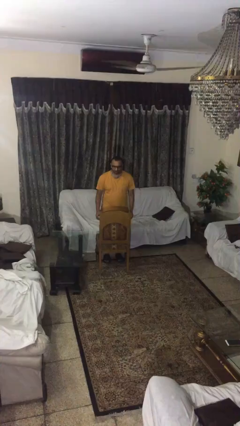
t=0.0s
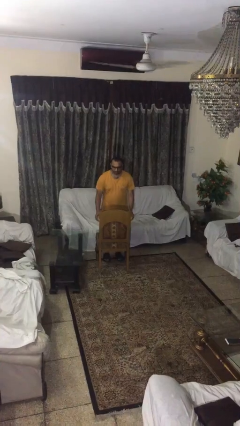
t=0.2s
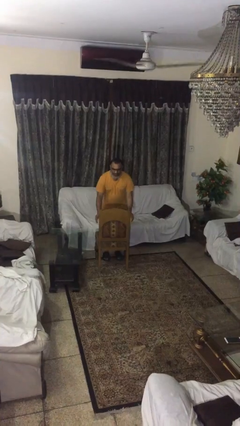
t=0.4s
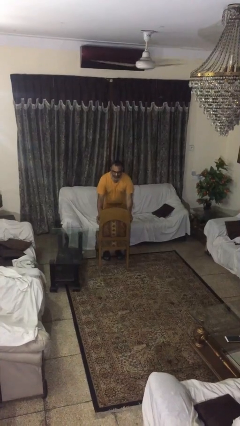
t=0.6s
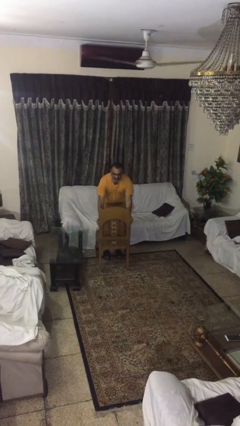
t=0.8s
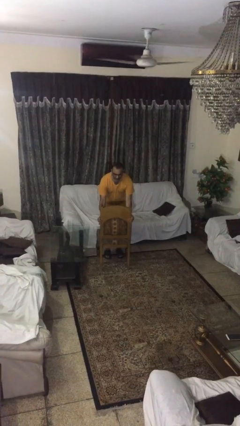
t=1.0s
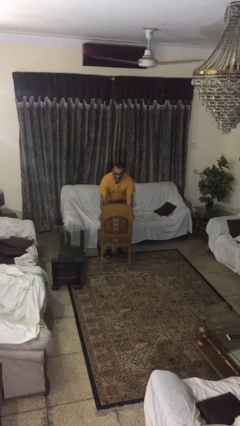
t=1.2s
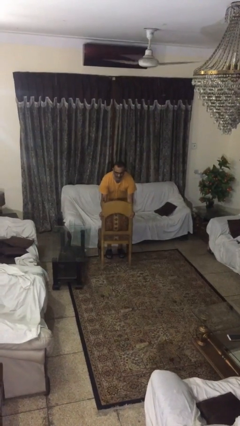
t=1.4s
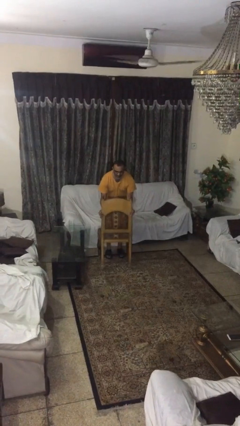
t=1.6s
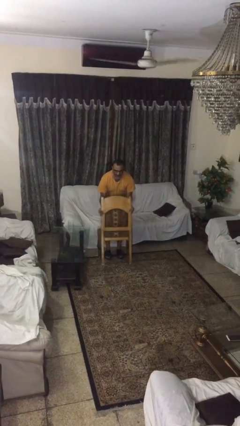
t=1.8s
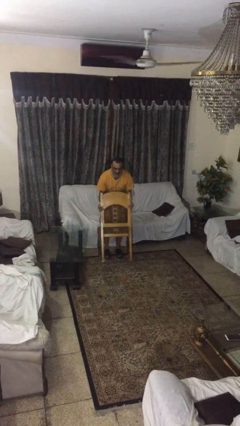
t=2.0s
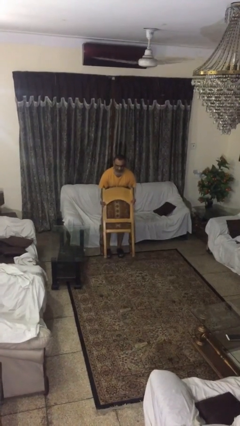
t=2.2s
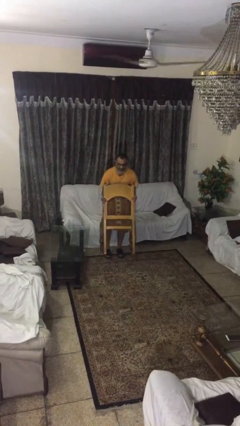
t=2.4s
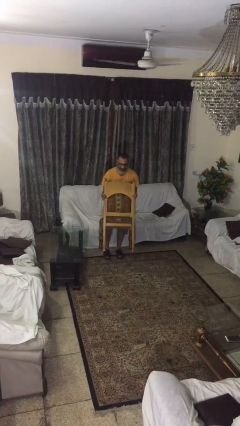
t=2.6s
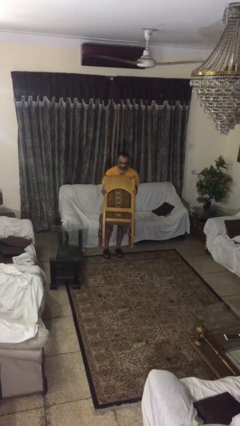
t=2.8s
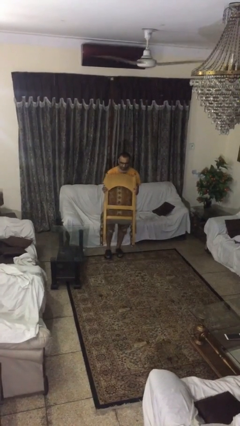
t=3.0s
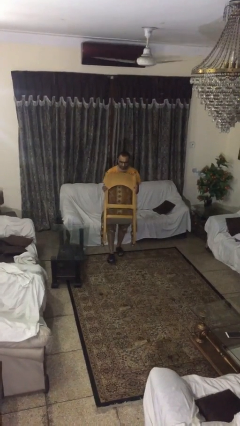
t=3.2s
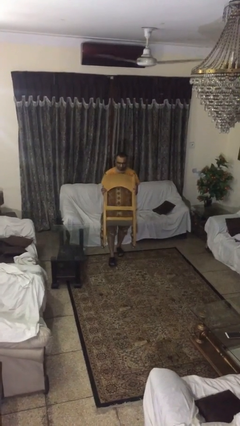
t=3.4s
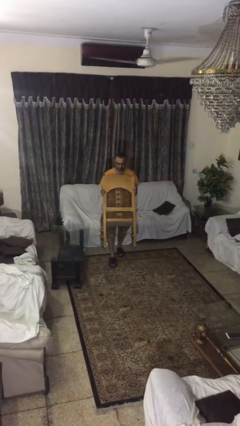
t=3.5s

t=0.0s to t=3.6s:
person picks up object from floor

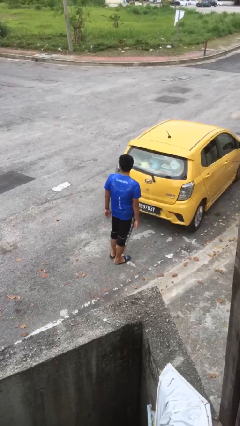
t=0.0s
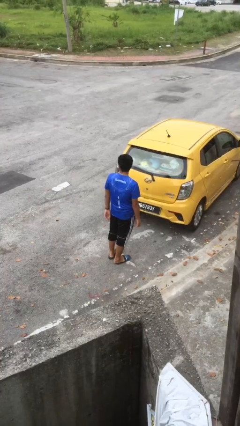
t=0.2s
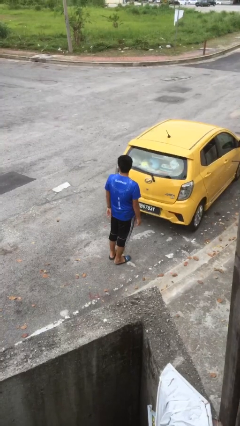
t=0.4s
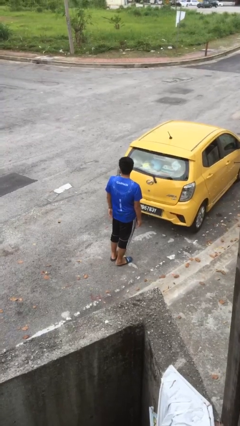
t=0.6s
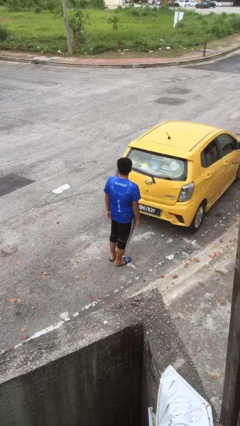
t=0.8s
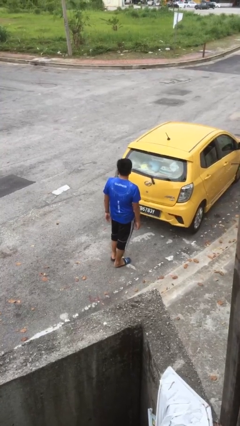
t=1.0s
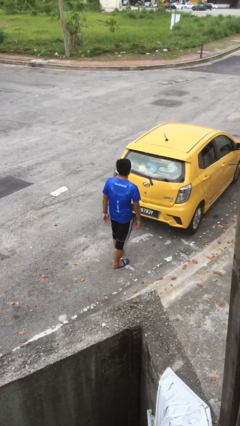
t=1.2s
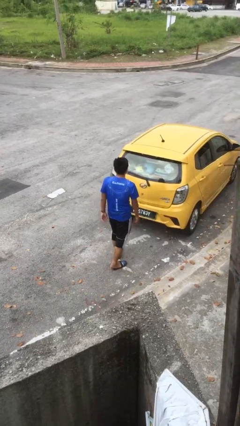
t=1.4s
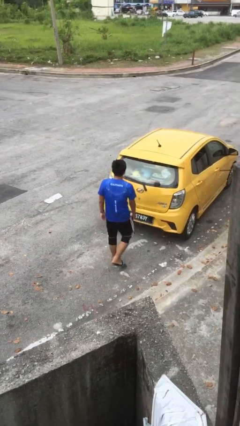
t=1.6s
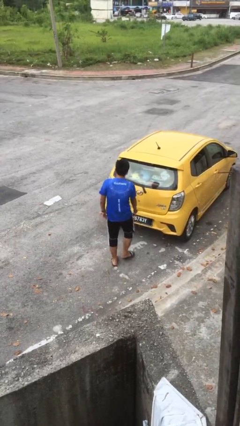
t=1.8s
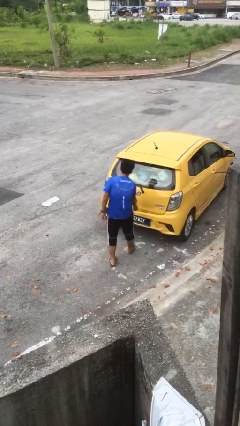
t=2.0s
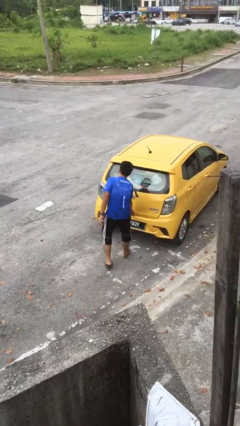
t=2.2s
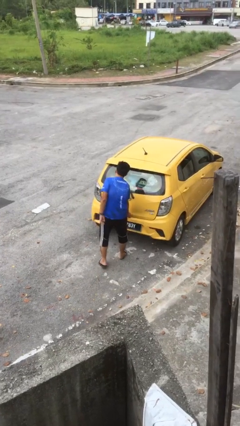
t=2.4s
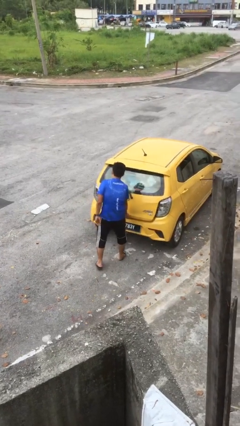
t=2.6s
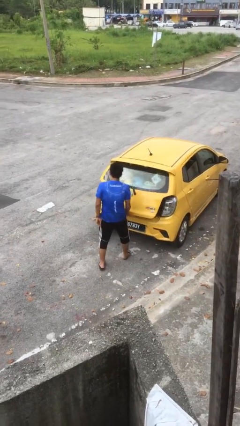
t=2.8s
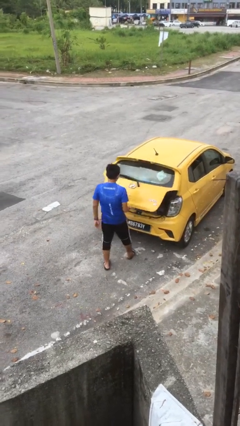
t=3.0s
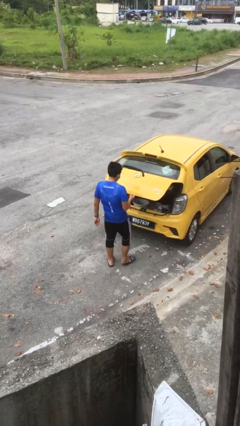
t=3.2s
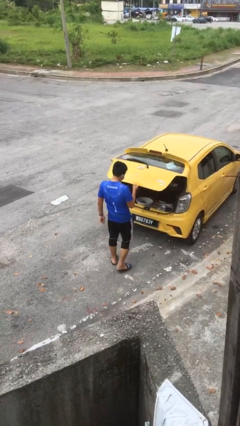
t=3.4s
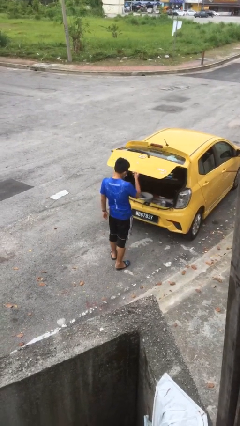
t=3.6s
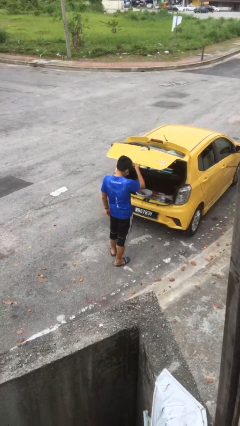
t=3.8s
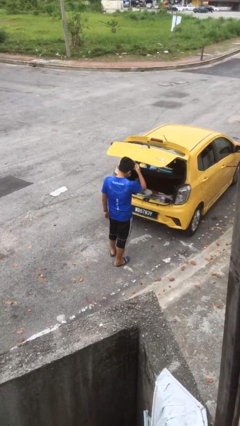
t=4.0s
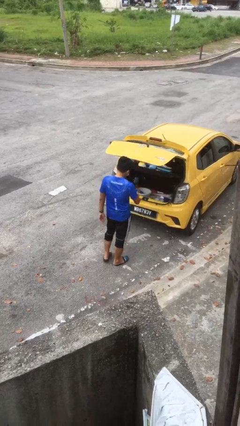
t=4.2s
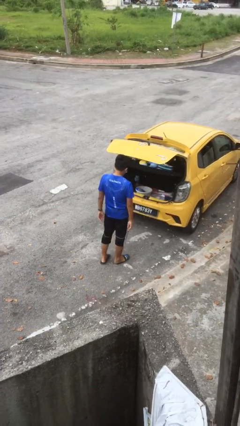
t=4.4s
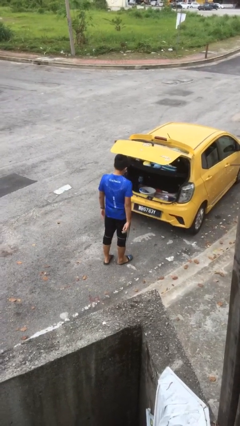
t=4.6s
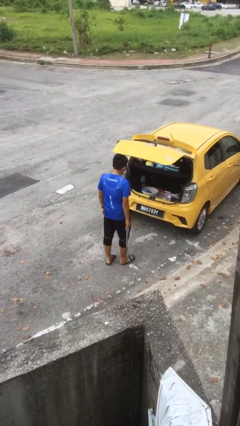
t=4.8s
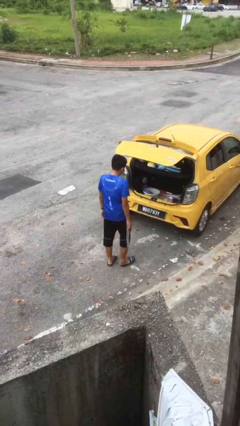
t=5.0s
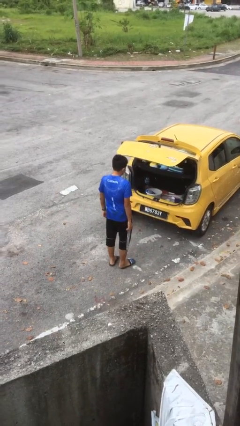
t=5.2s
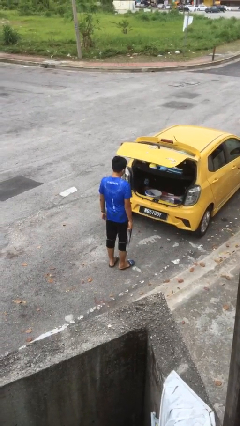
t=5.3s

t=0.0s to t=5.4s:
person opens car trunk

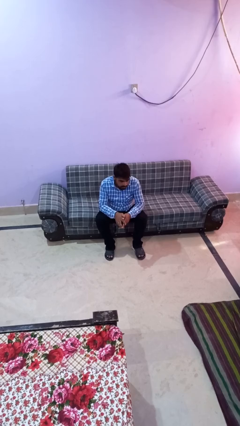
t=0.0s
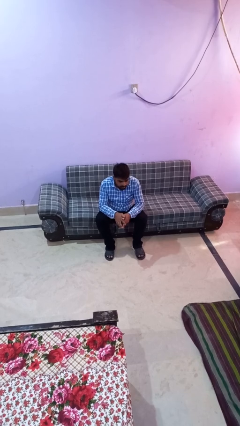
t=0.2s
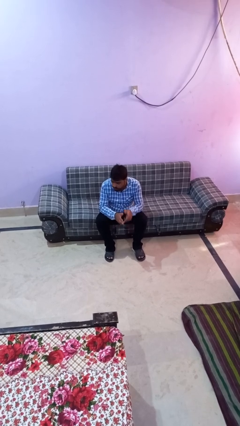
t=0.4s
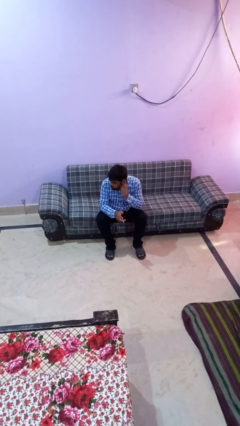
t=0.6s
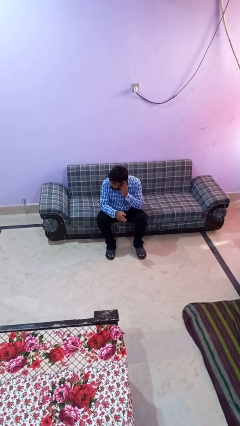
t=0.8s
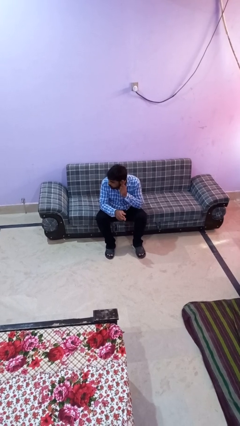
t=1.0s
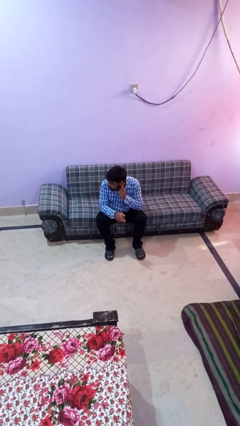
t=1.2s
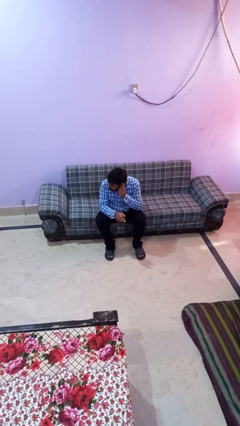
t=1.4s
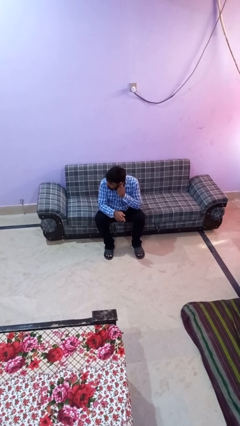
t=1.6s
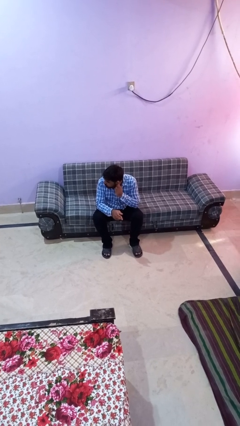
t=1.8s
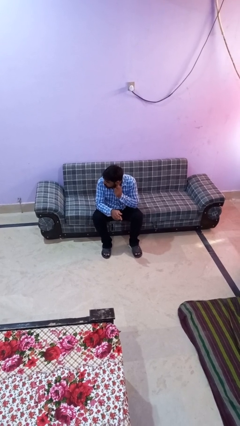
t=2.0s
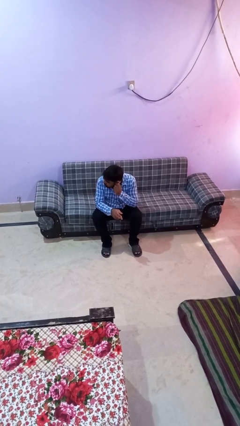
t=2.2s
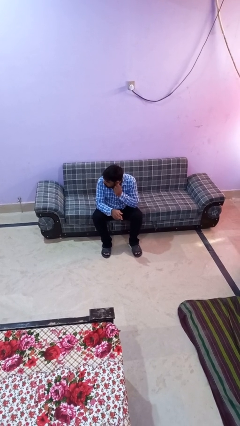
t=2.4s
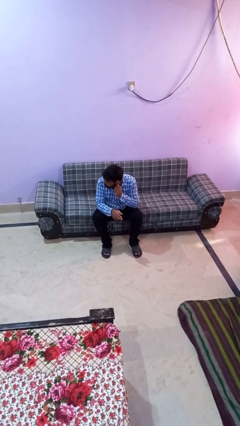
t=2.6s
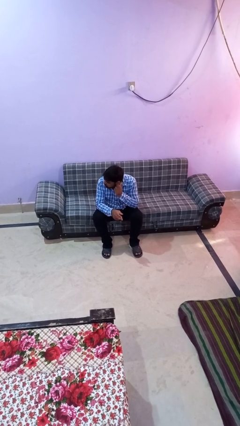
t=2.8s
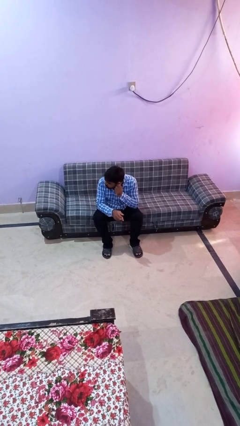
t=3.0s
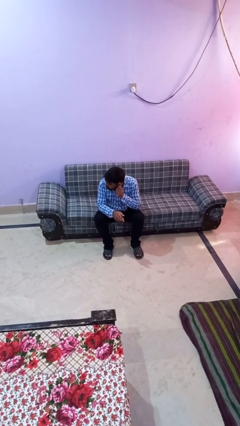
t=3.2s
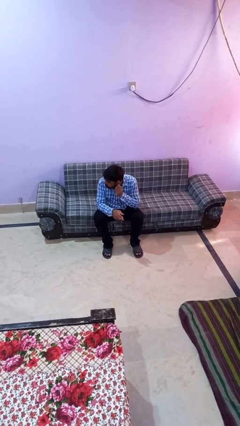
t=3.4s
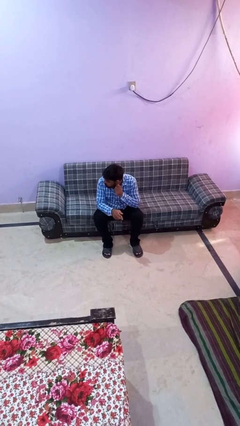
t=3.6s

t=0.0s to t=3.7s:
person touches earlobe

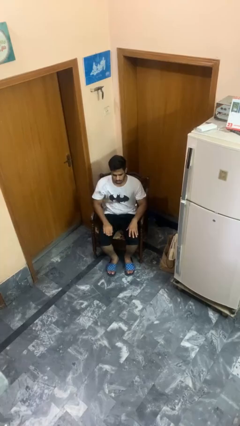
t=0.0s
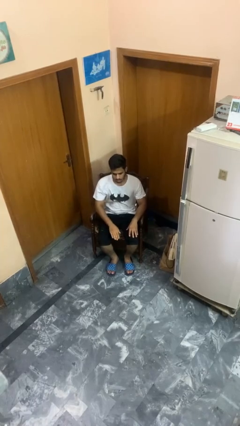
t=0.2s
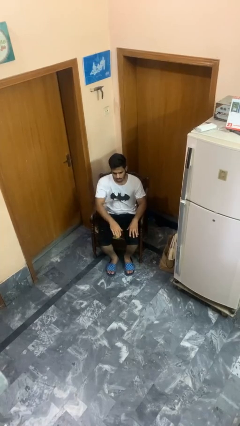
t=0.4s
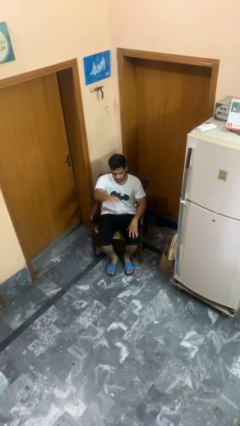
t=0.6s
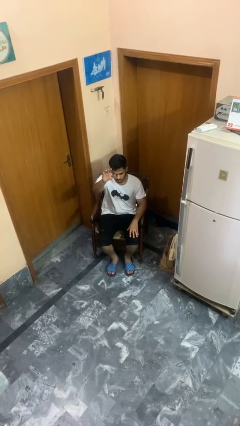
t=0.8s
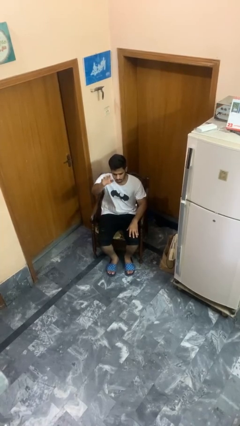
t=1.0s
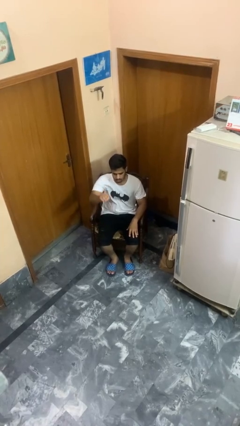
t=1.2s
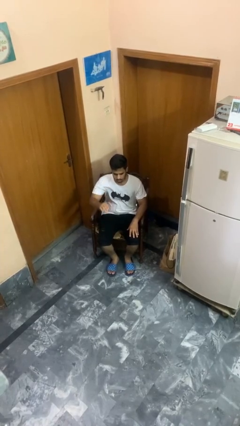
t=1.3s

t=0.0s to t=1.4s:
person gestures swipe up

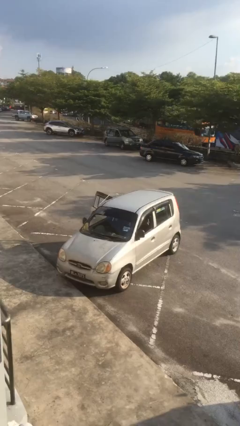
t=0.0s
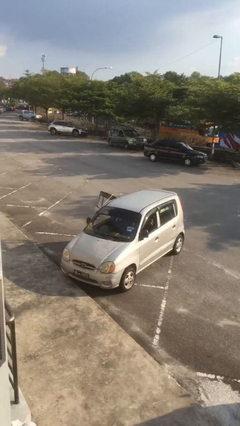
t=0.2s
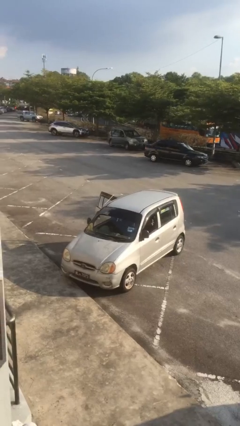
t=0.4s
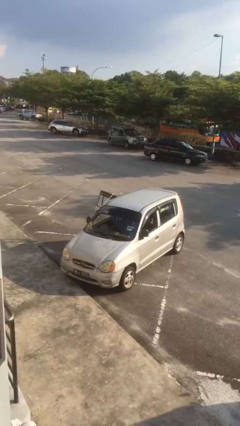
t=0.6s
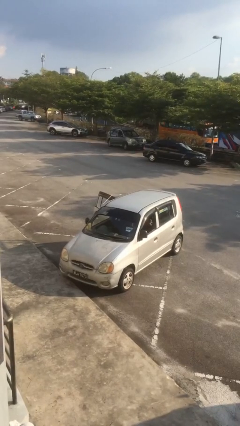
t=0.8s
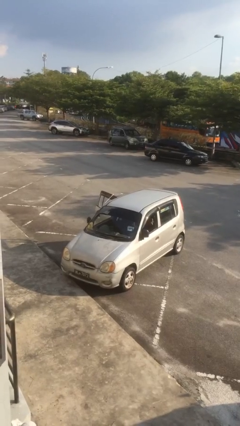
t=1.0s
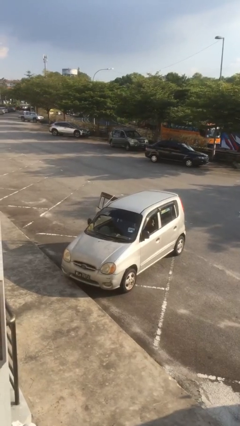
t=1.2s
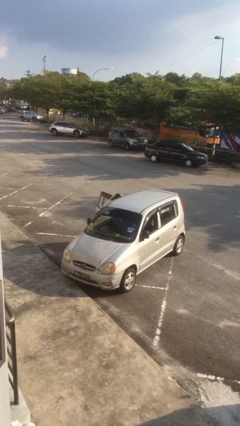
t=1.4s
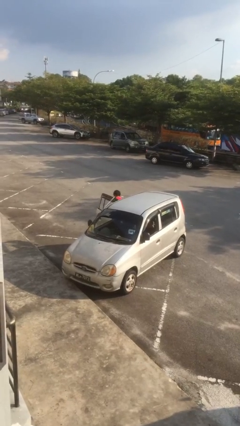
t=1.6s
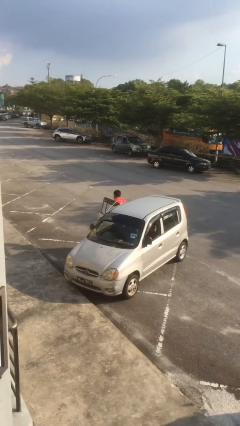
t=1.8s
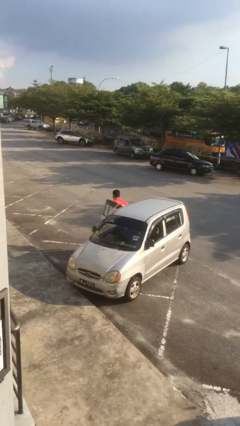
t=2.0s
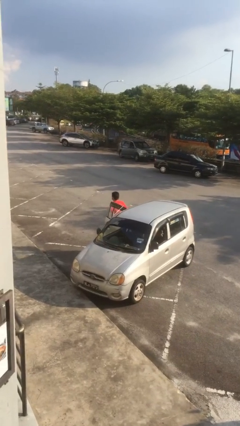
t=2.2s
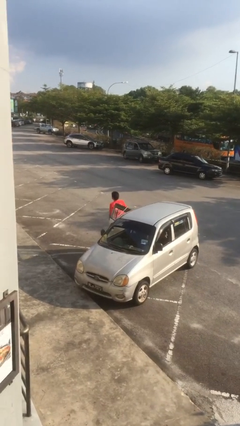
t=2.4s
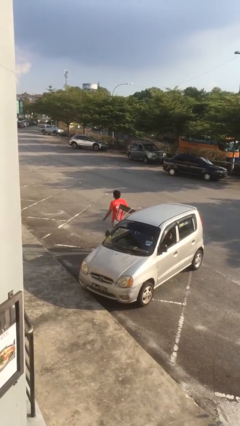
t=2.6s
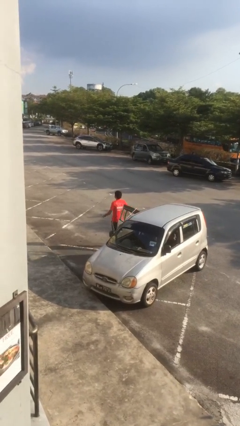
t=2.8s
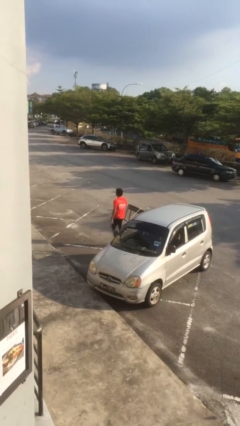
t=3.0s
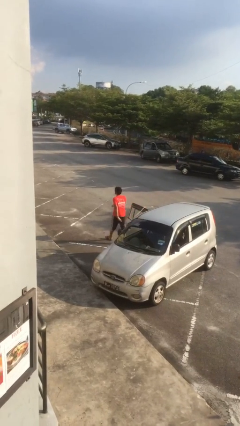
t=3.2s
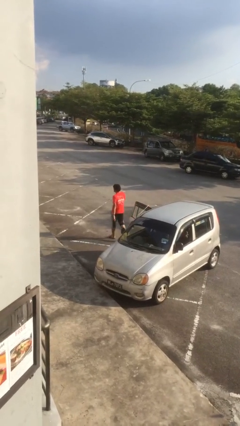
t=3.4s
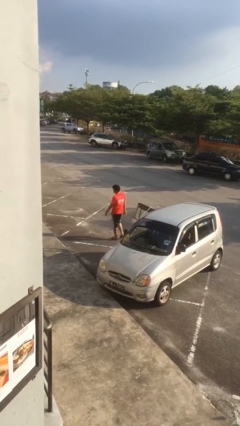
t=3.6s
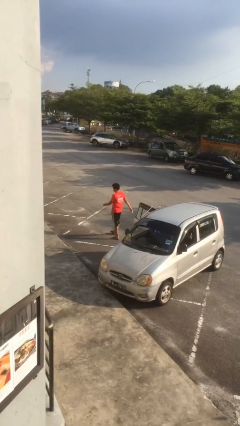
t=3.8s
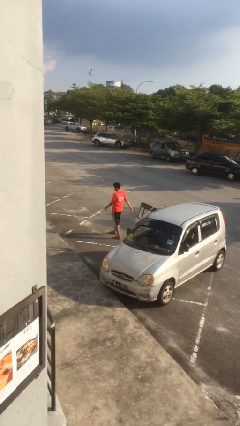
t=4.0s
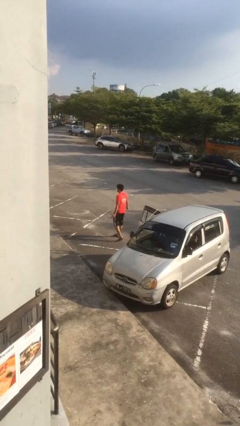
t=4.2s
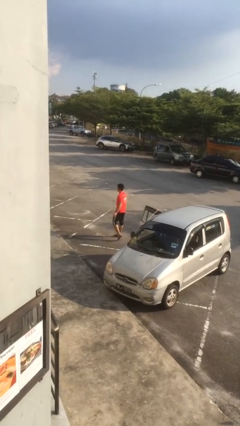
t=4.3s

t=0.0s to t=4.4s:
person exits car
